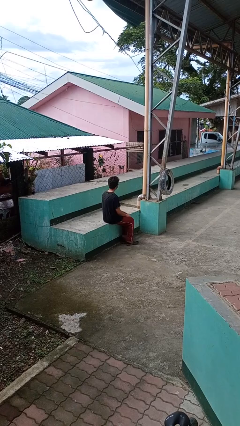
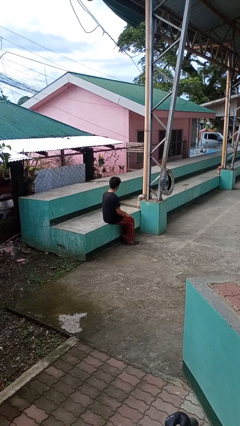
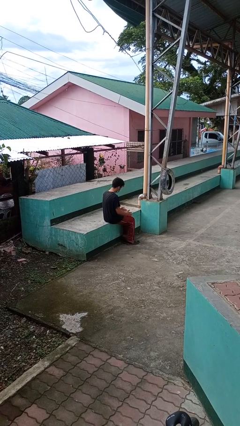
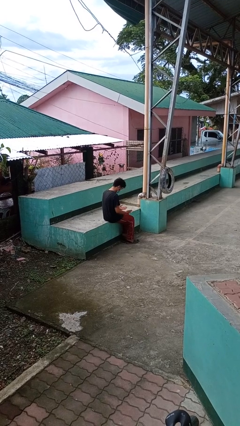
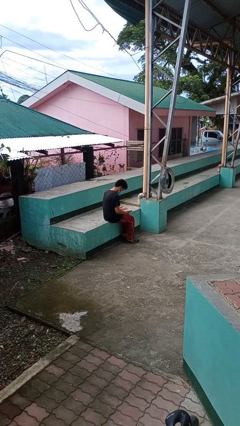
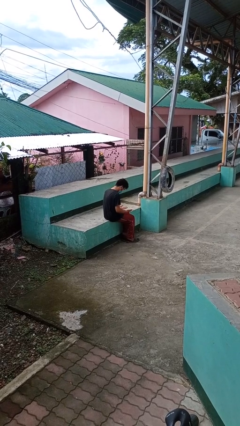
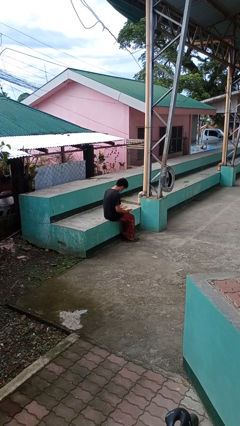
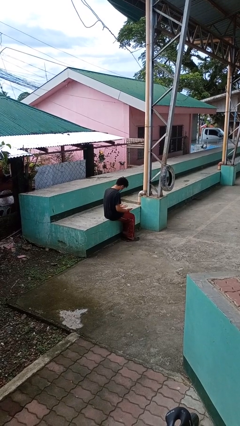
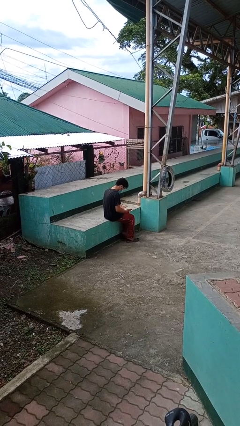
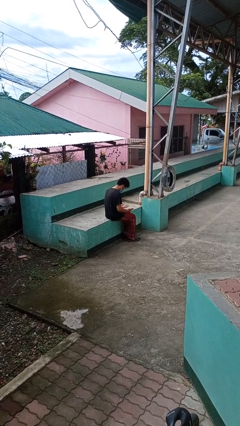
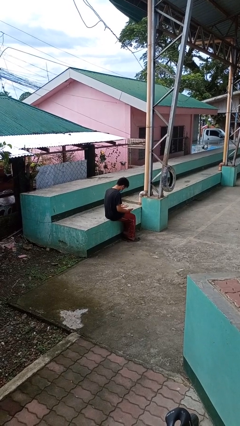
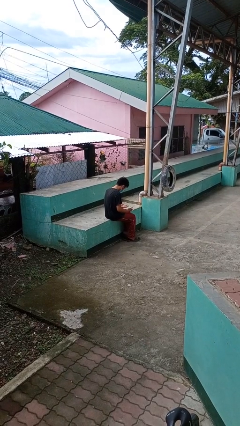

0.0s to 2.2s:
person looks at hands in lap

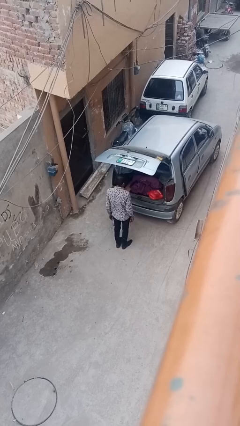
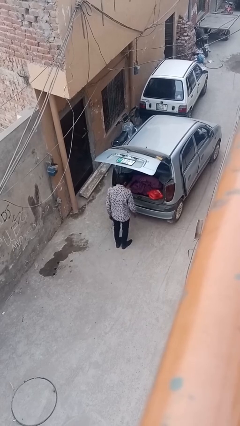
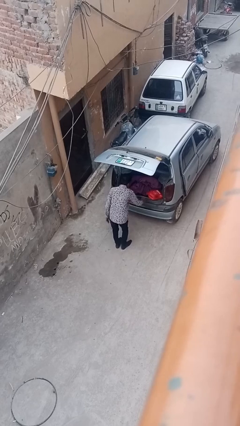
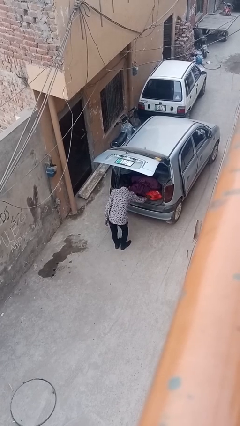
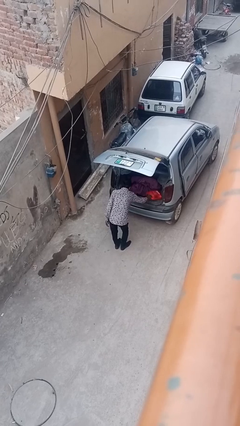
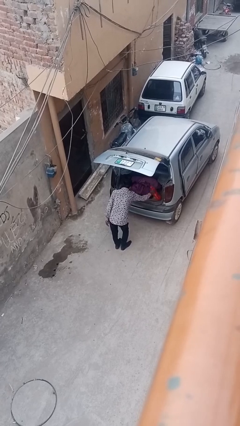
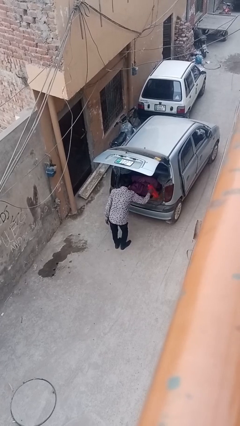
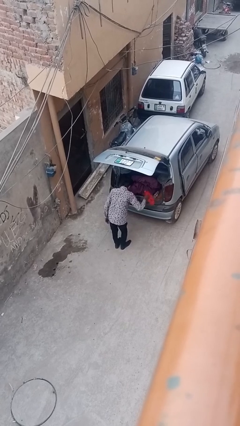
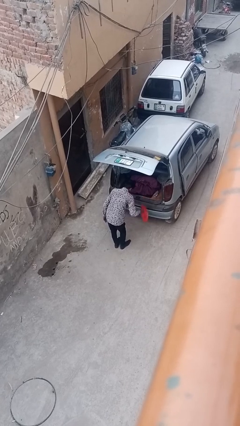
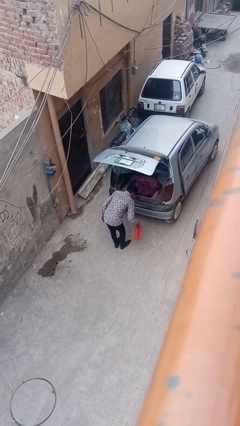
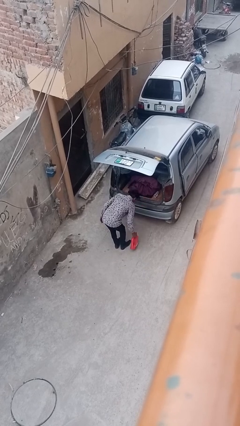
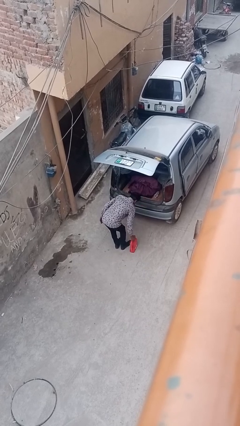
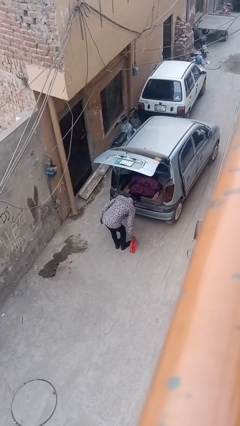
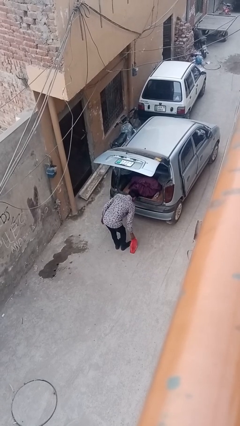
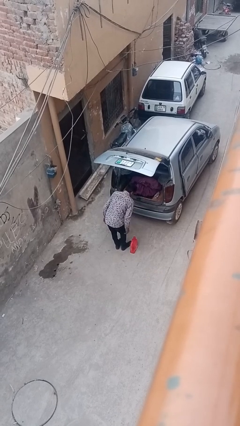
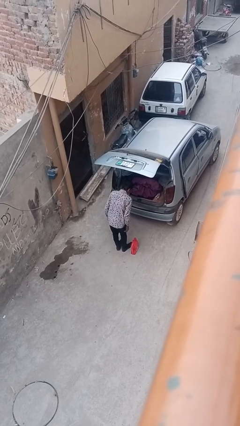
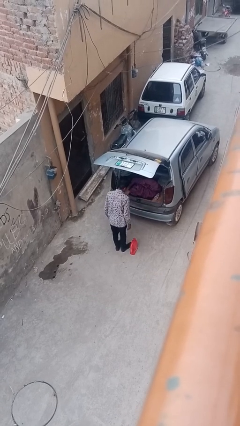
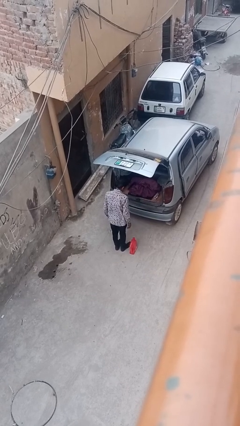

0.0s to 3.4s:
person unloads car

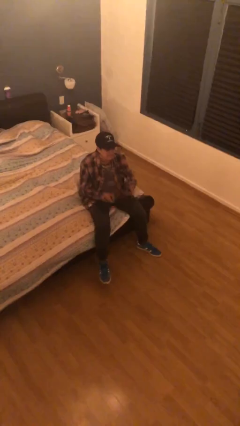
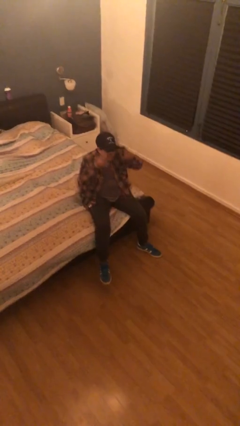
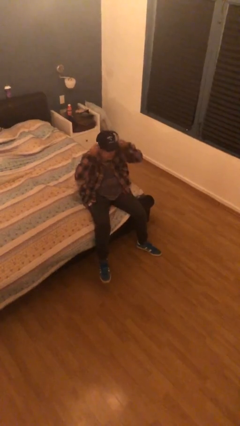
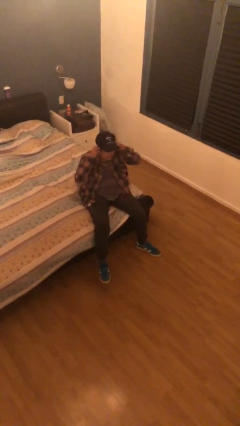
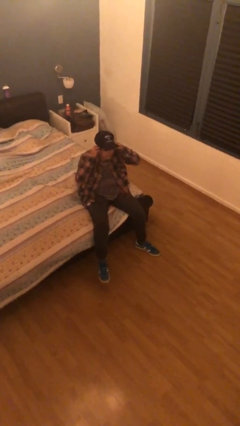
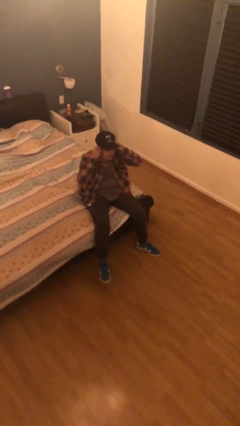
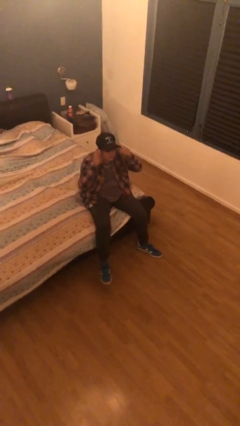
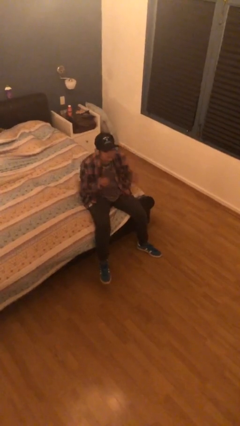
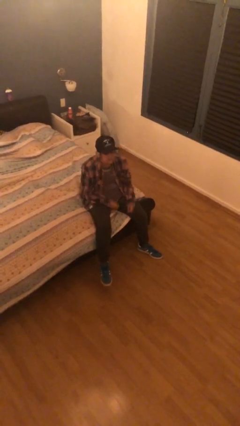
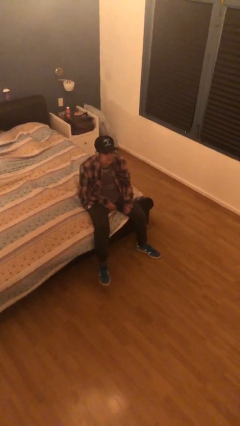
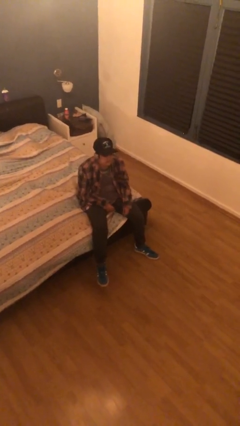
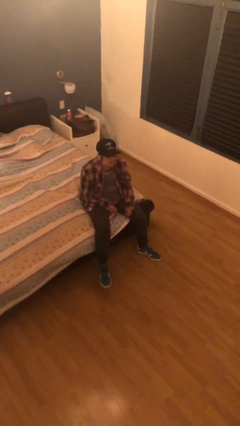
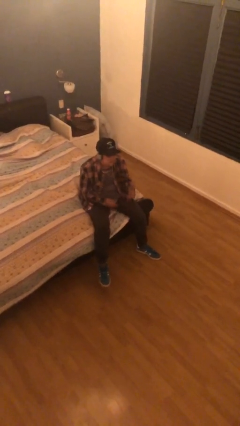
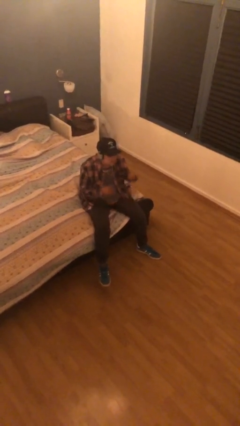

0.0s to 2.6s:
person puts on headphones

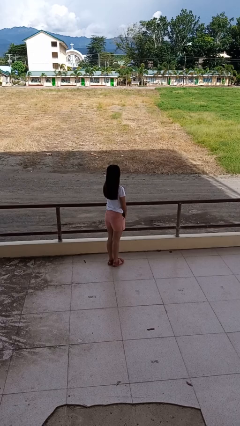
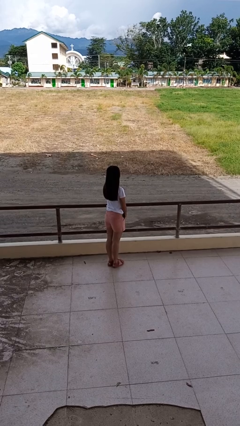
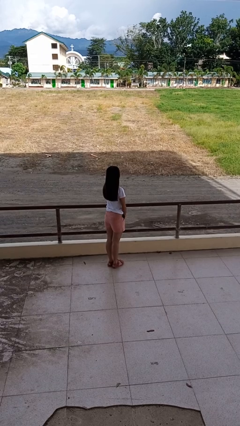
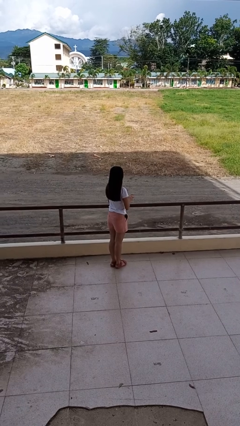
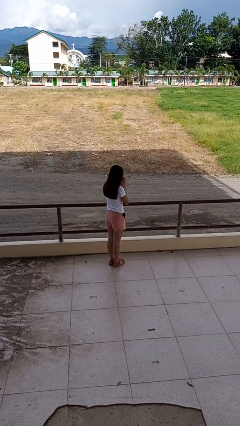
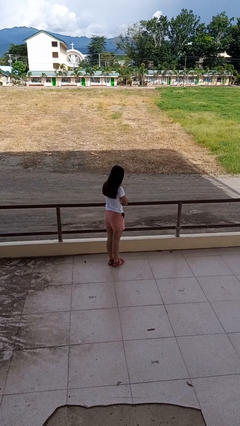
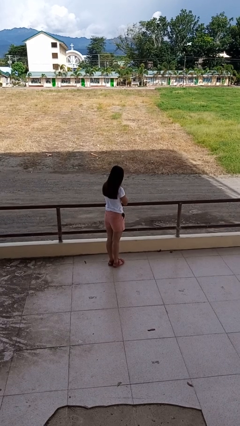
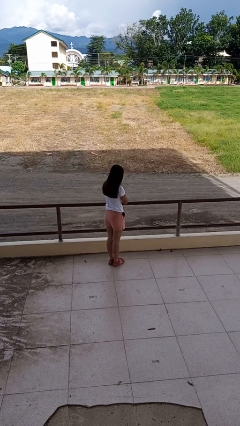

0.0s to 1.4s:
person sneezes into hand

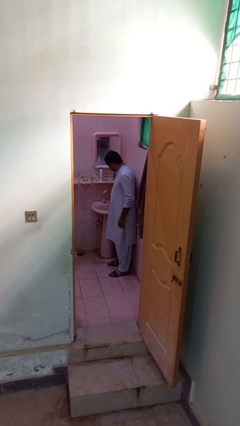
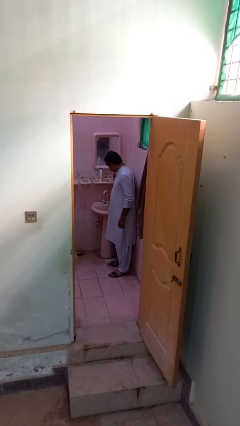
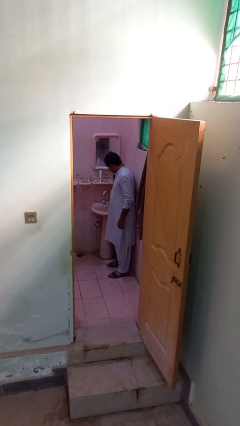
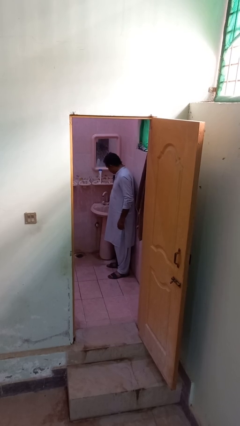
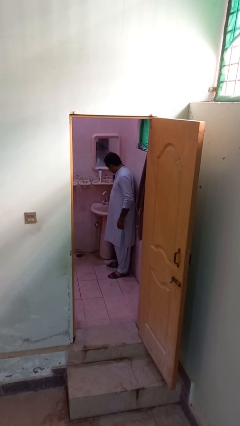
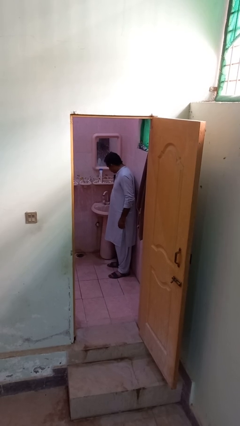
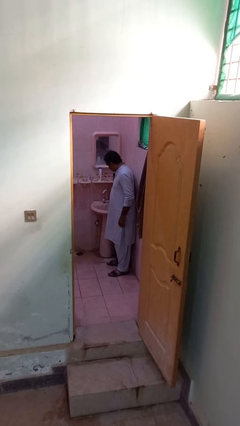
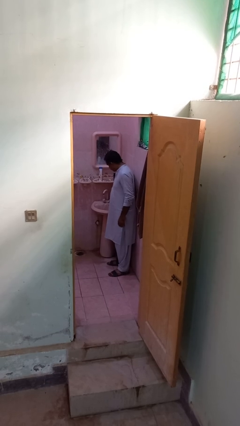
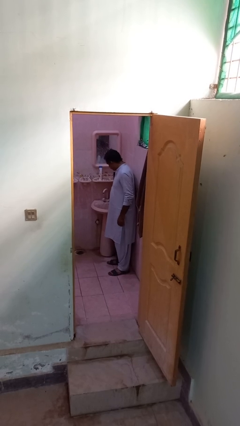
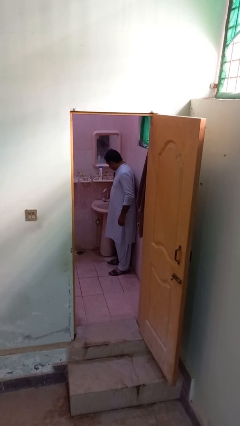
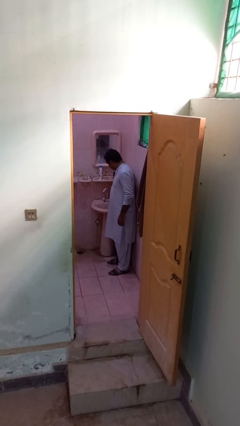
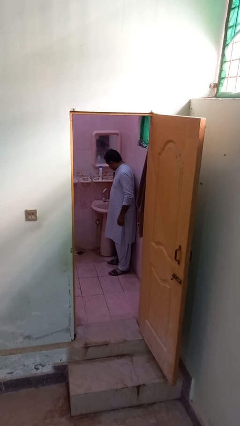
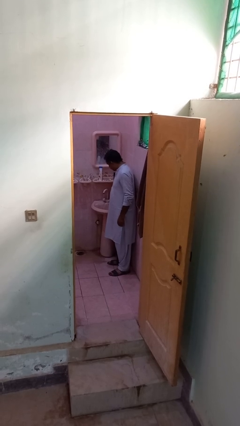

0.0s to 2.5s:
person turns off faucet

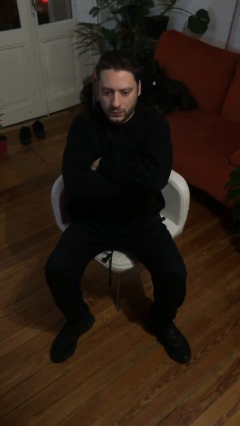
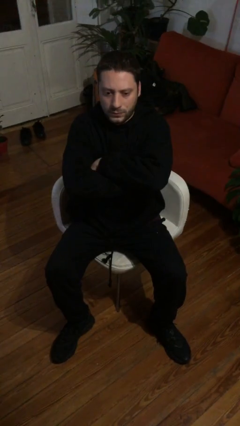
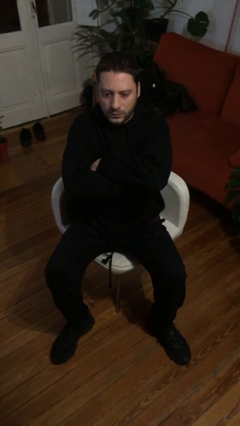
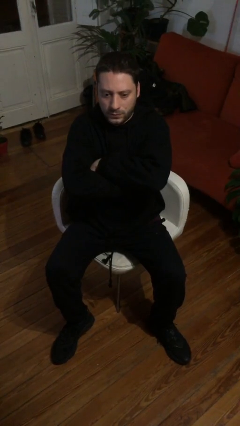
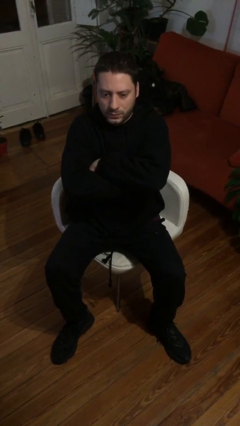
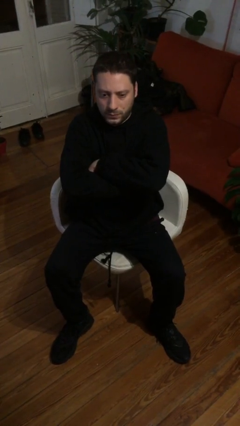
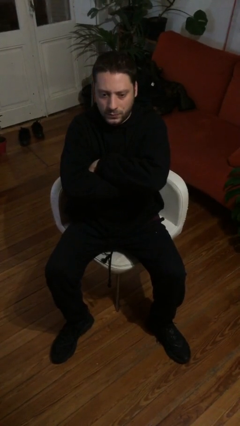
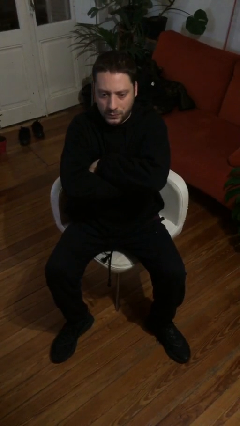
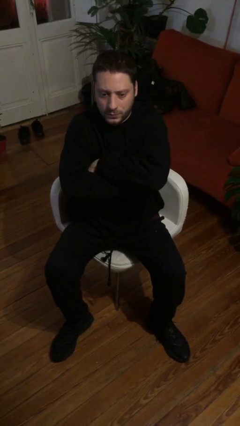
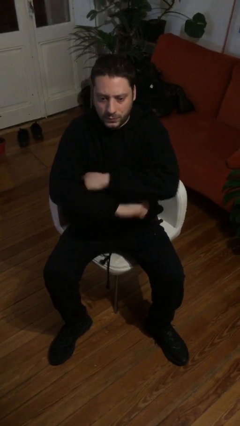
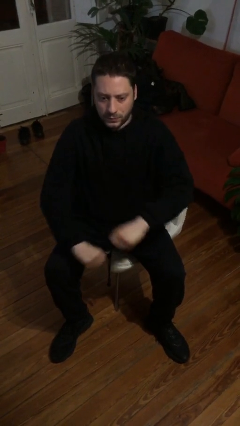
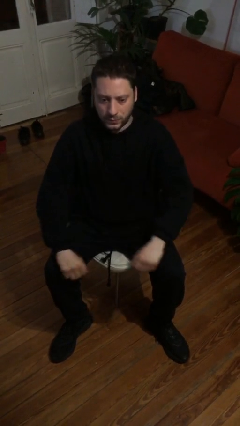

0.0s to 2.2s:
person crosses arms

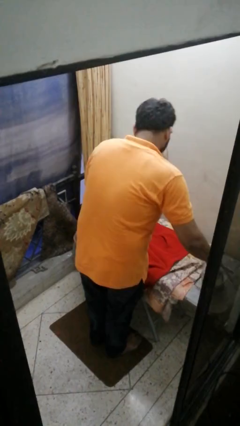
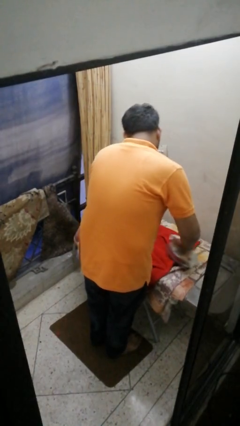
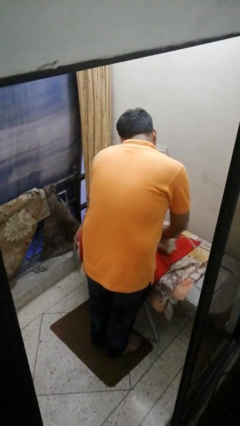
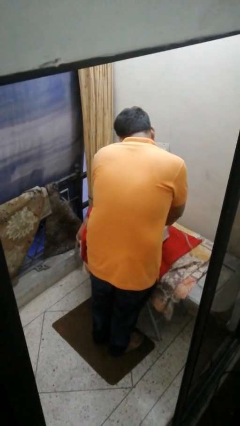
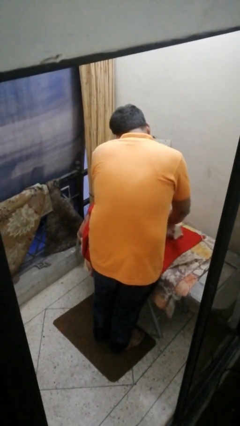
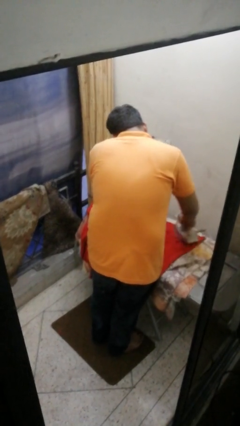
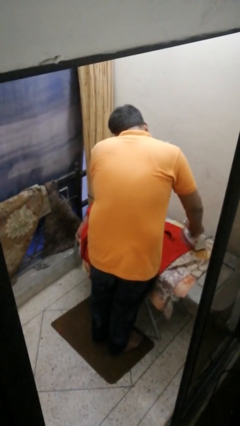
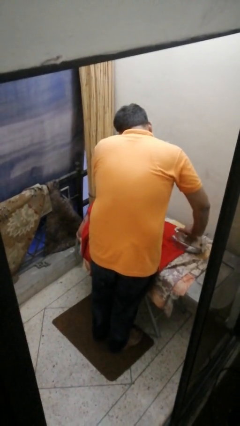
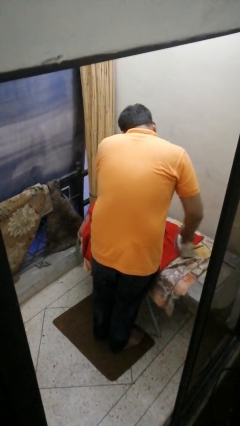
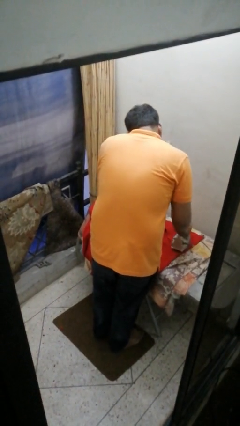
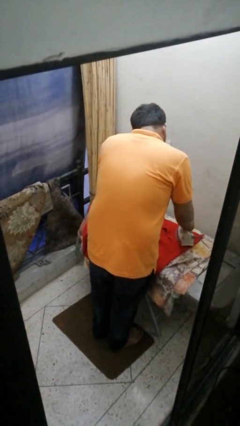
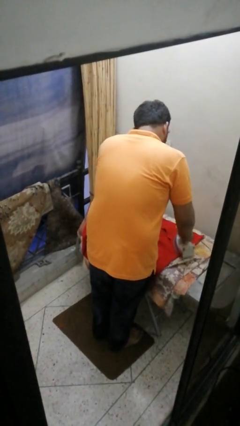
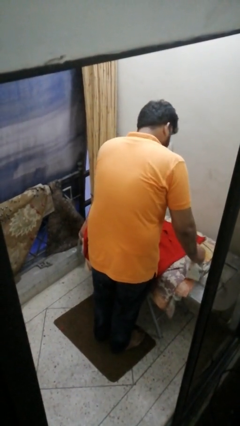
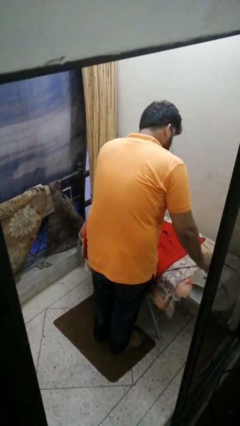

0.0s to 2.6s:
person irons clothes

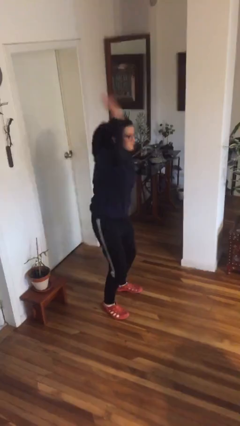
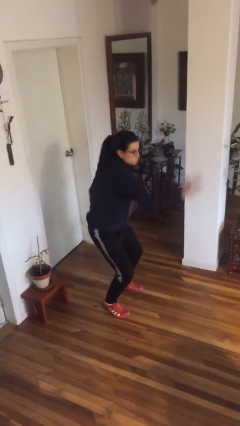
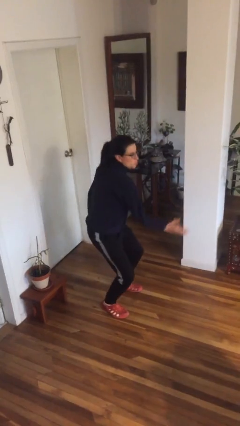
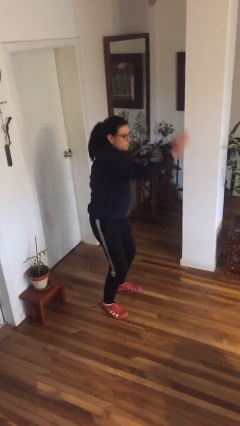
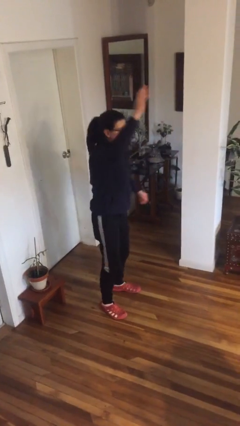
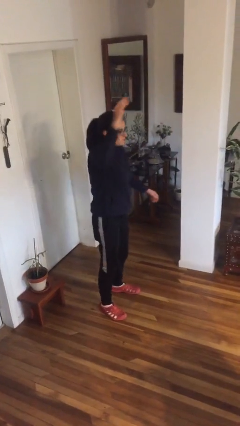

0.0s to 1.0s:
person karate chop
